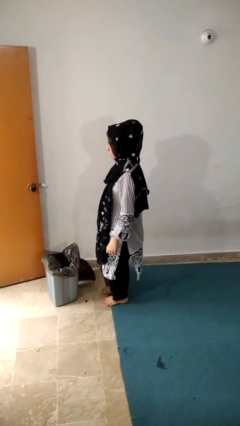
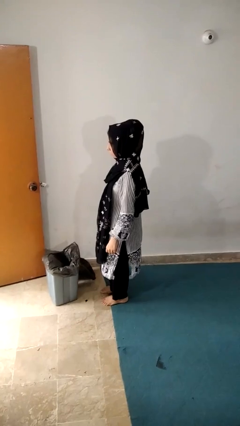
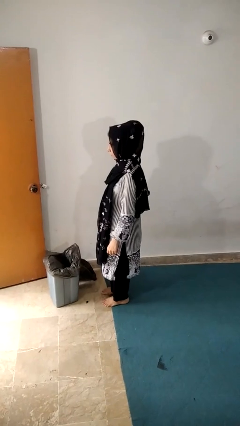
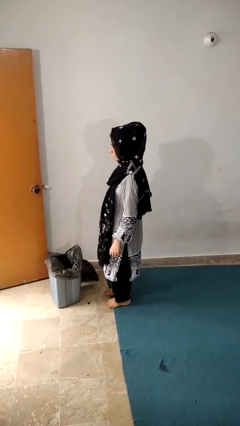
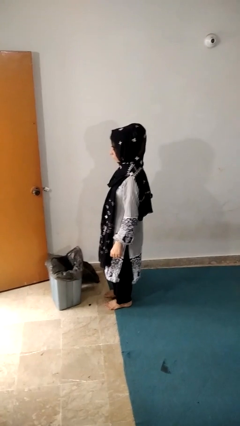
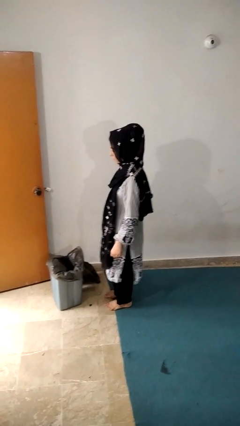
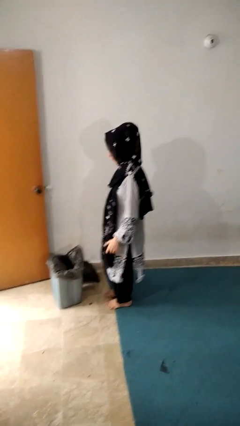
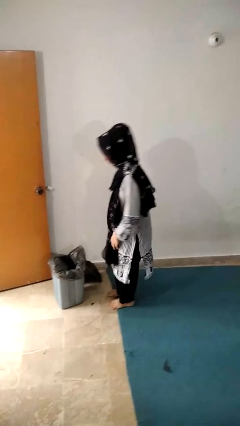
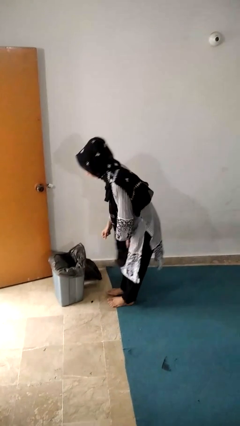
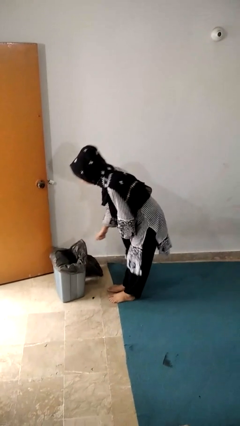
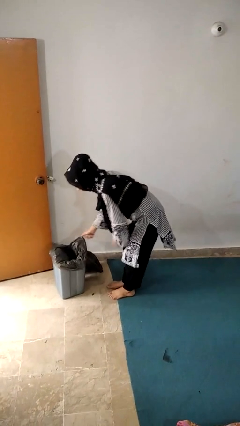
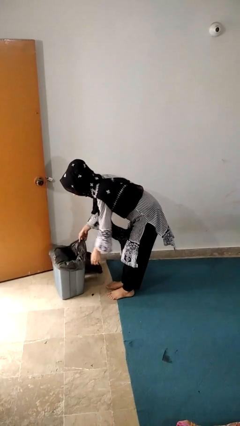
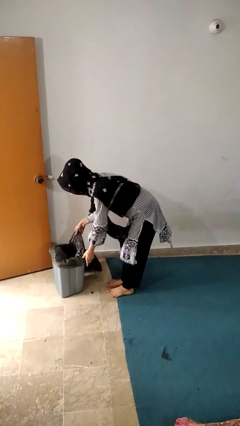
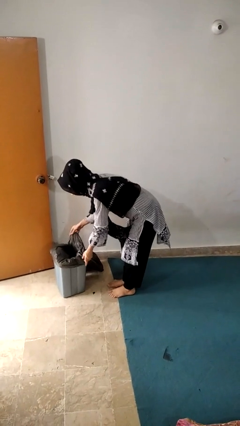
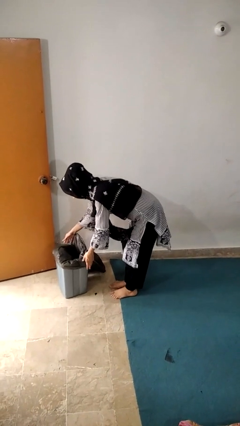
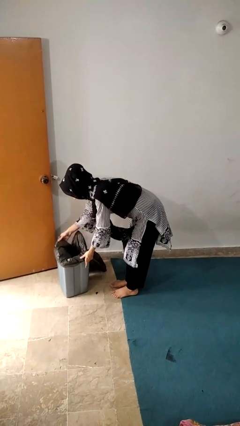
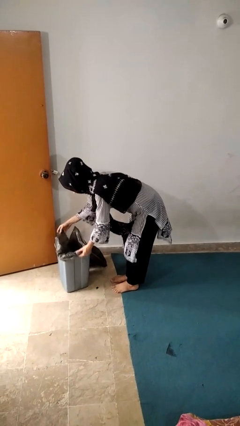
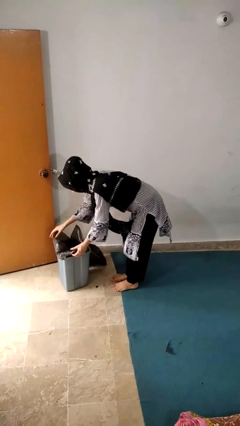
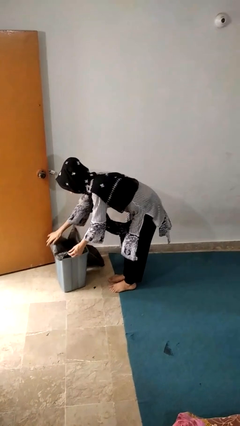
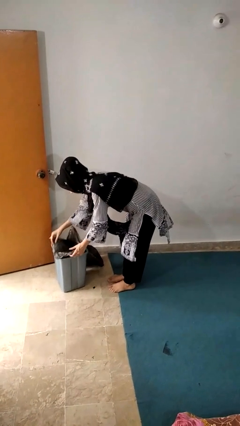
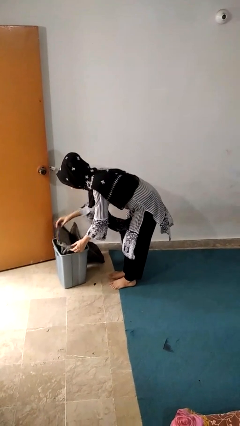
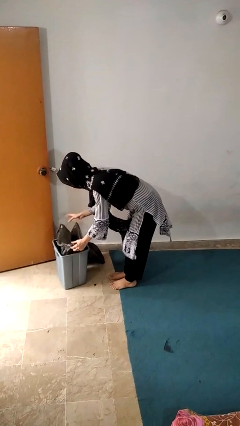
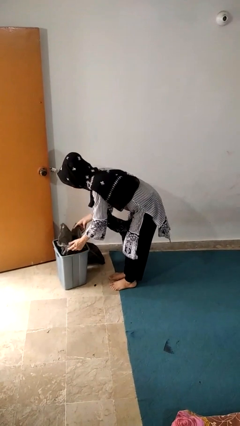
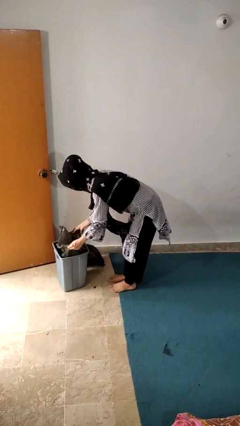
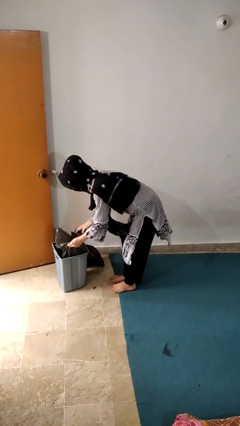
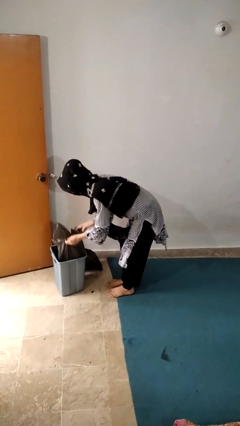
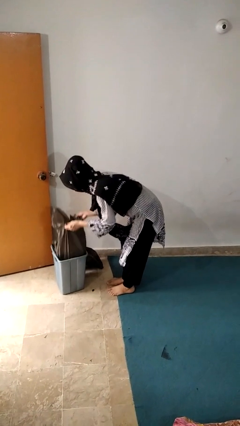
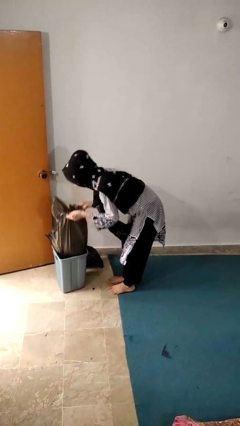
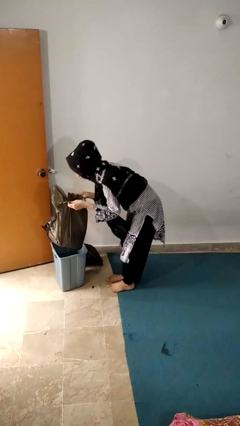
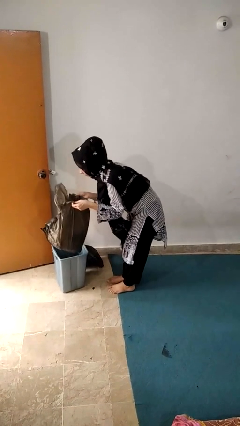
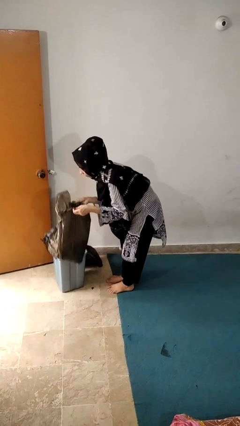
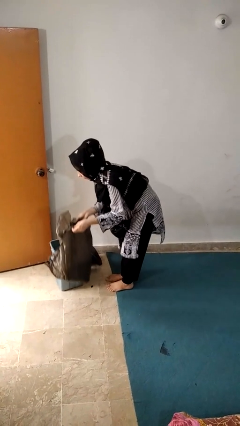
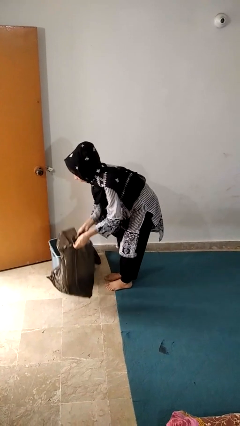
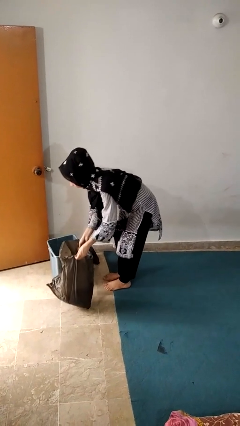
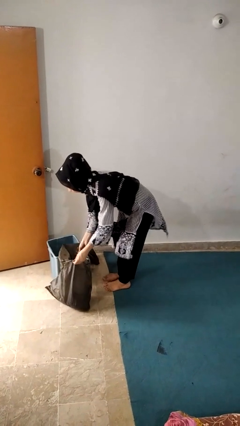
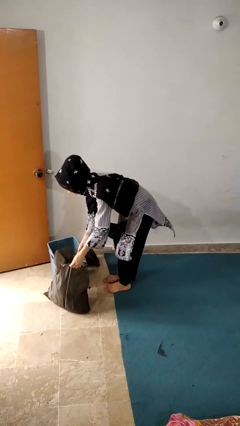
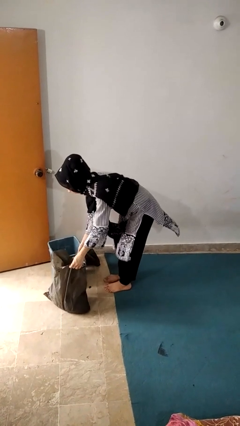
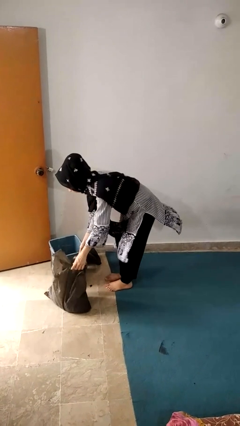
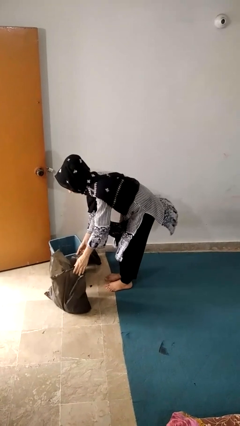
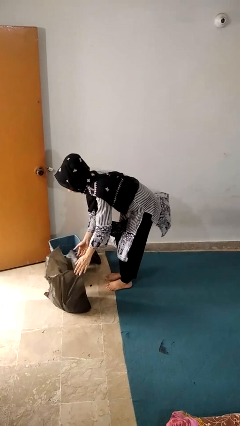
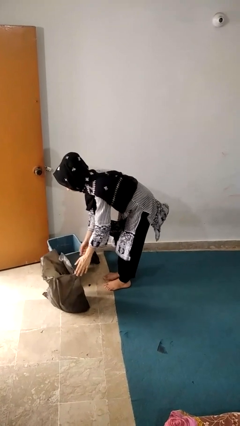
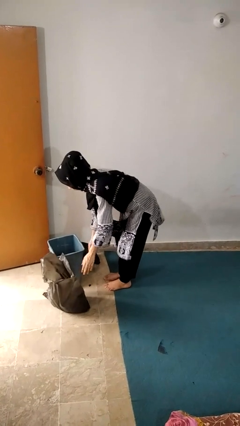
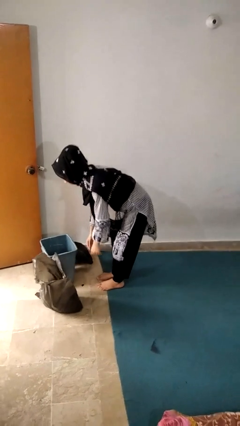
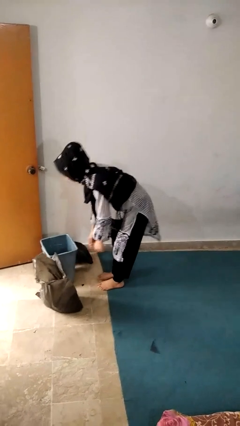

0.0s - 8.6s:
person removes trashbag from trashcan

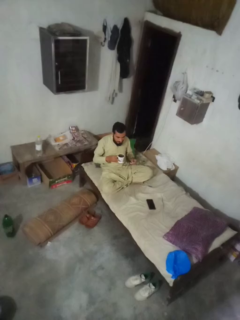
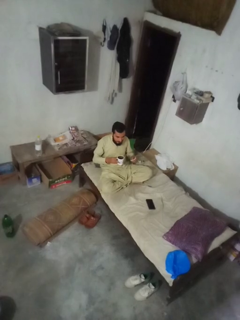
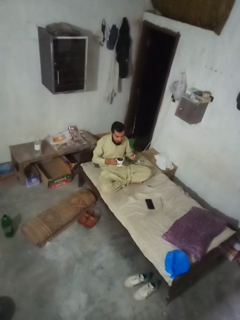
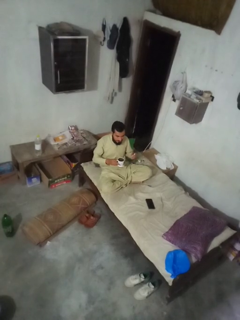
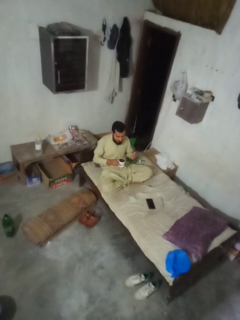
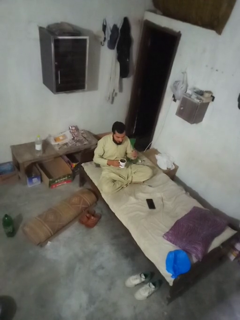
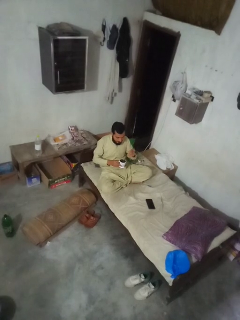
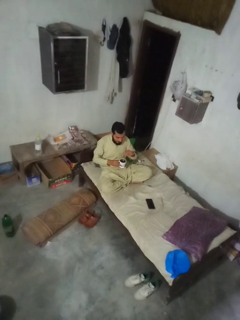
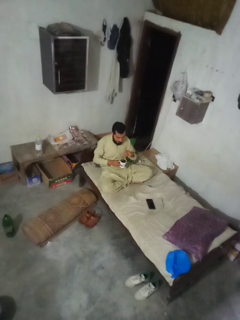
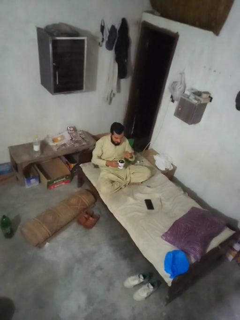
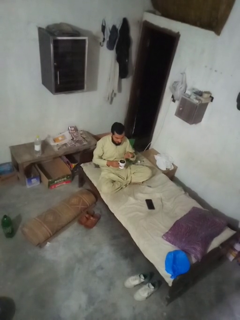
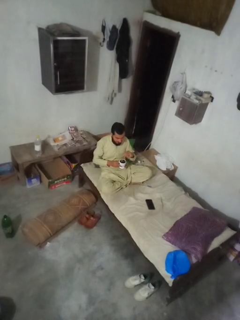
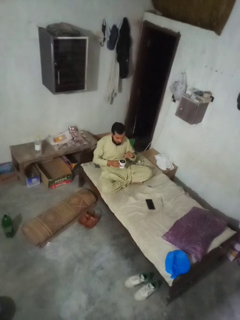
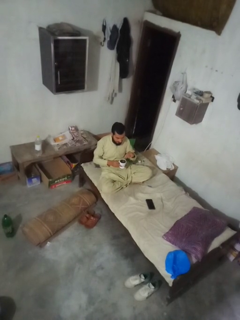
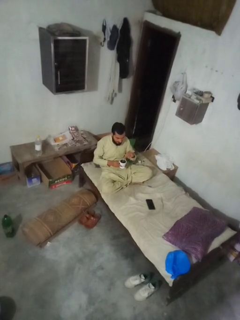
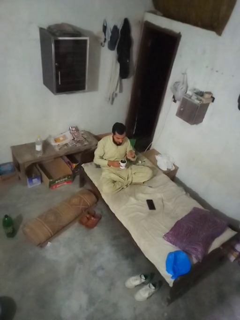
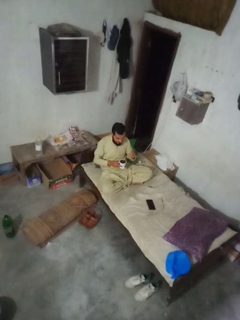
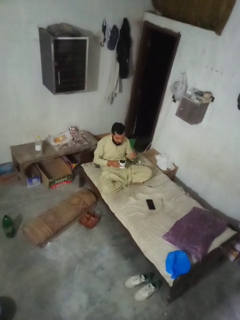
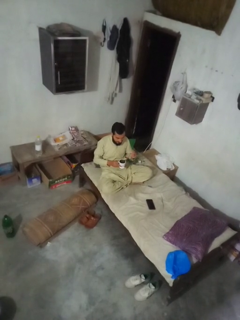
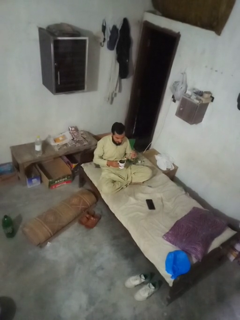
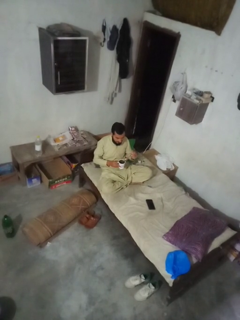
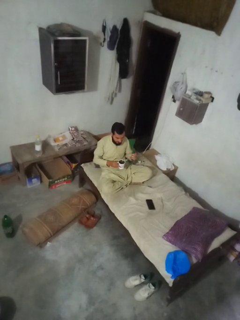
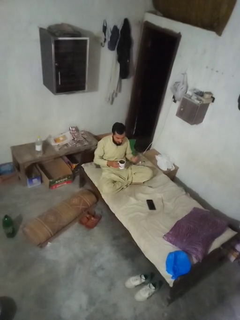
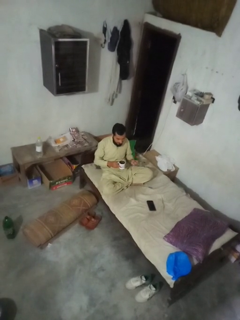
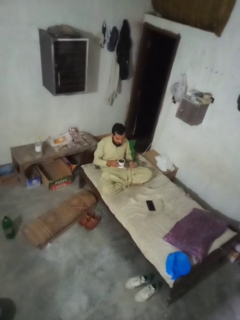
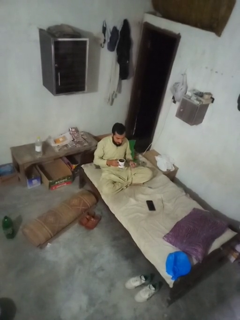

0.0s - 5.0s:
person stirs mug

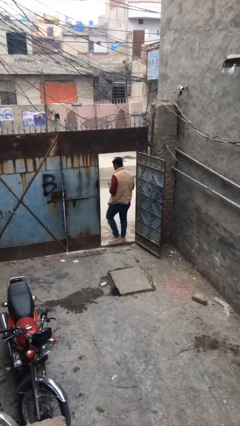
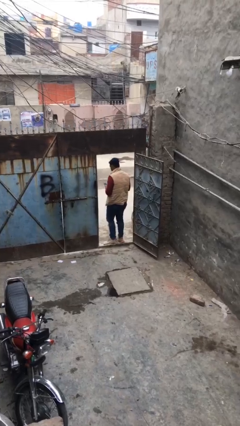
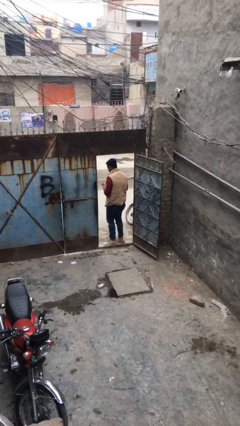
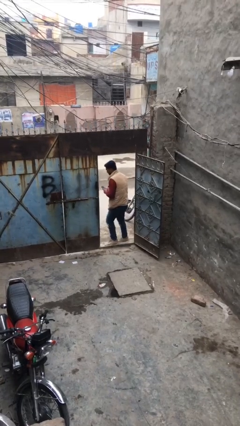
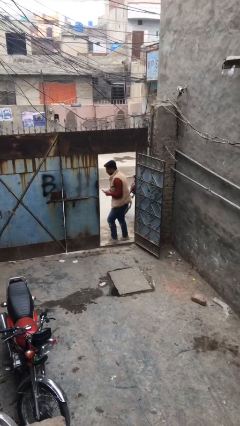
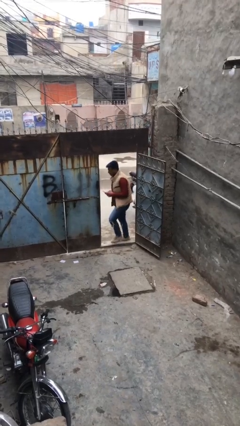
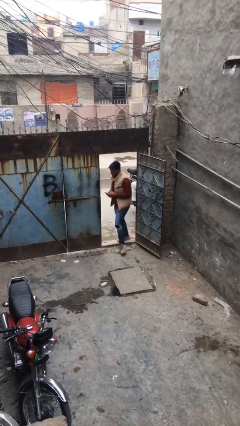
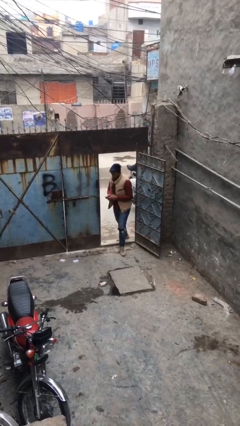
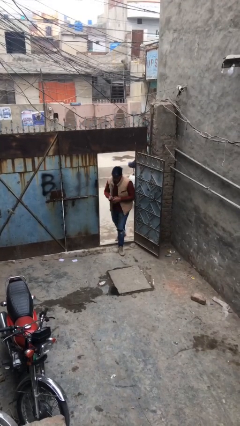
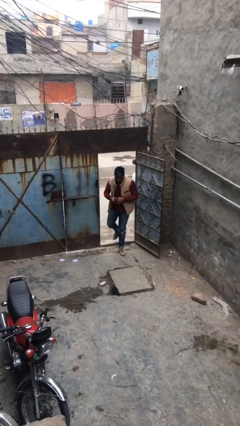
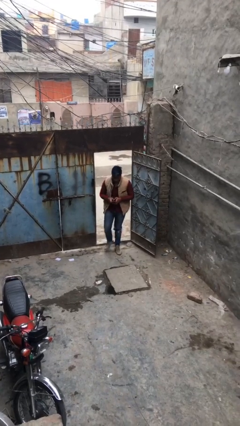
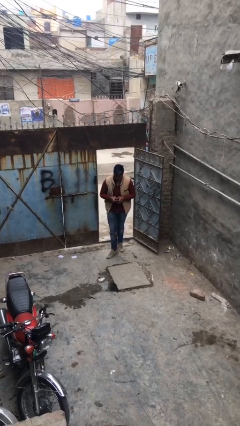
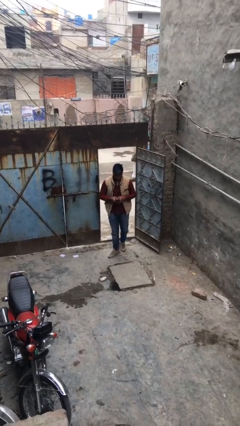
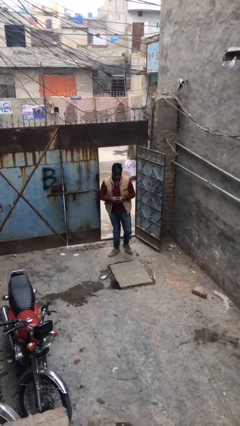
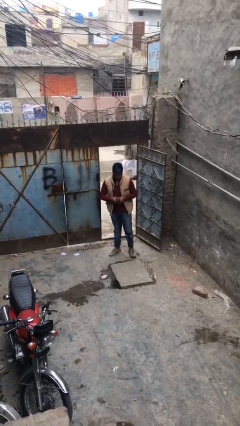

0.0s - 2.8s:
person enters scene through structure

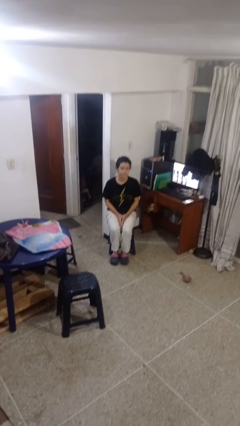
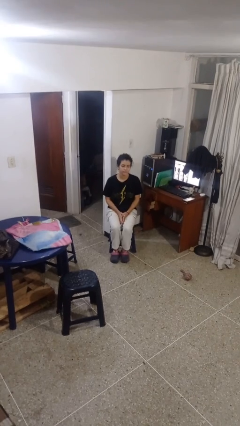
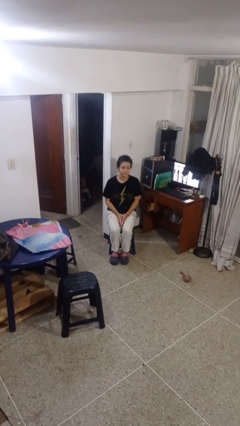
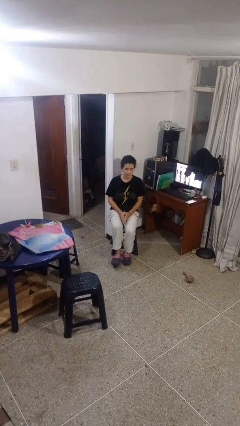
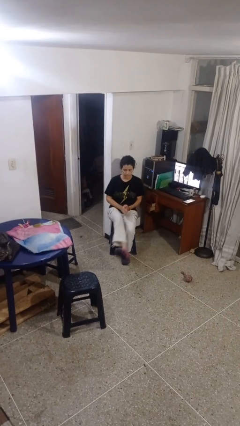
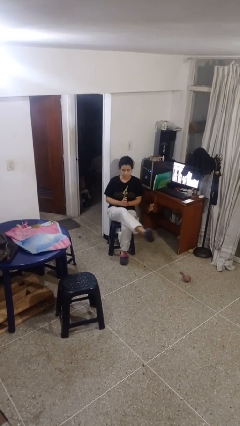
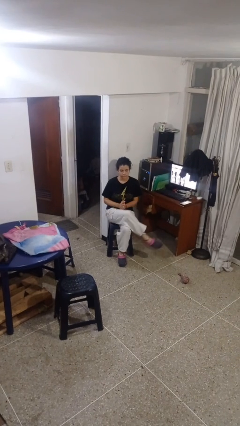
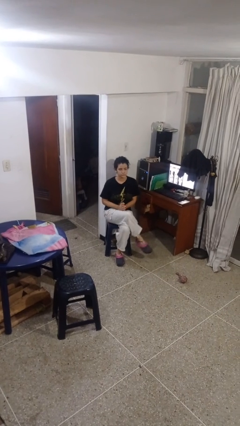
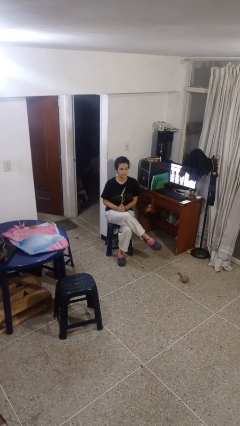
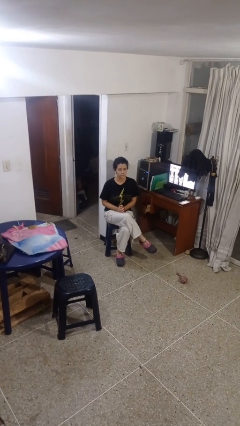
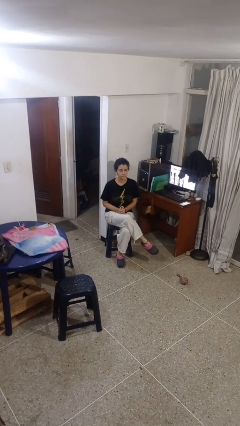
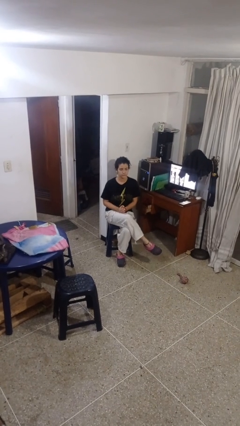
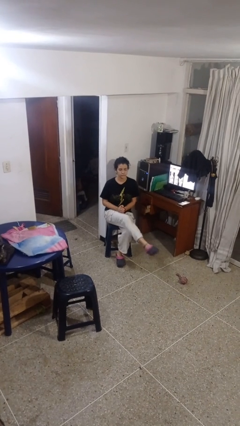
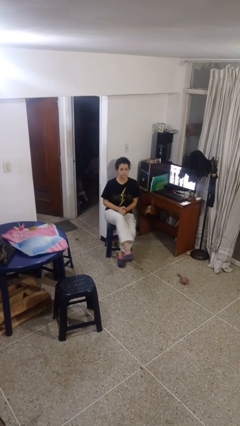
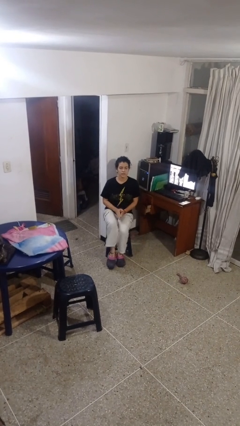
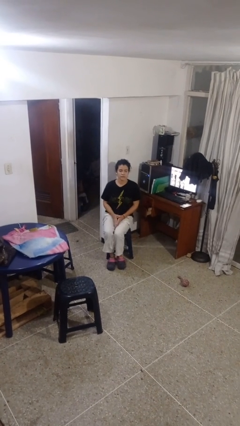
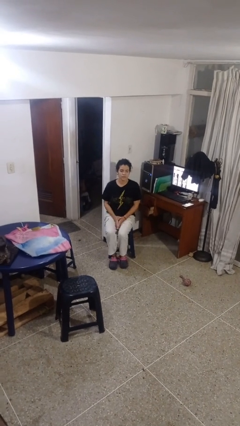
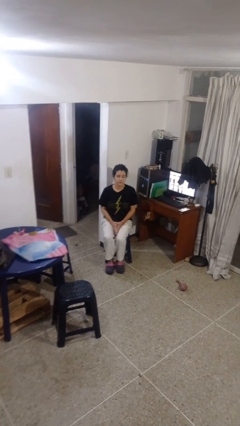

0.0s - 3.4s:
person crosses legs
